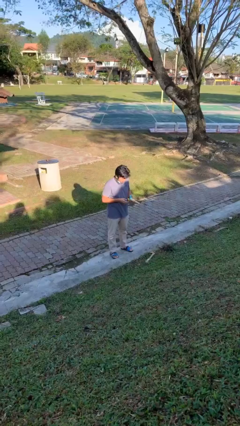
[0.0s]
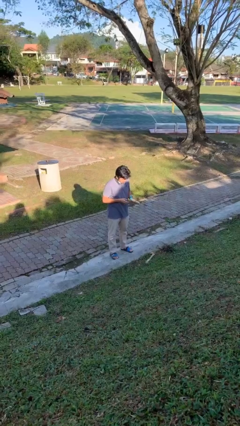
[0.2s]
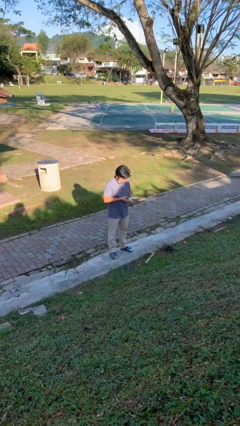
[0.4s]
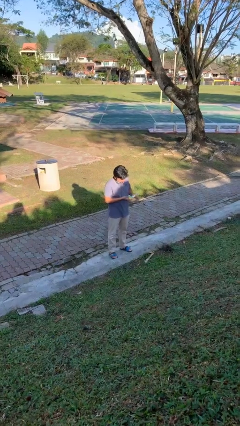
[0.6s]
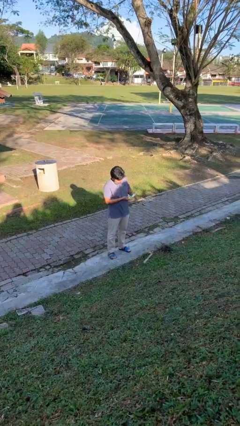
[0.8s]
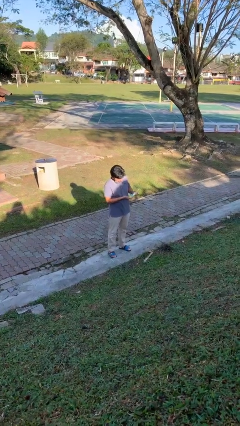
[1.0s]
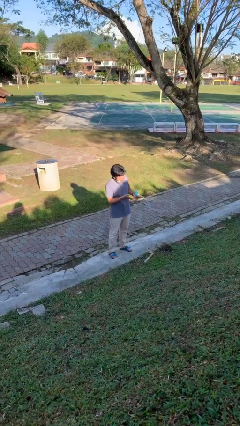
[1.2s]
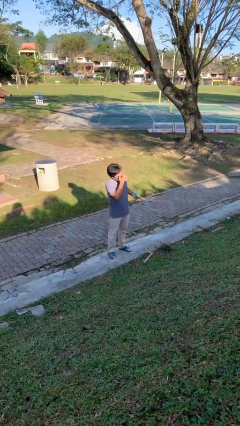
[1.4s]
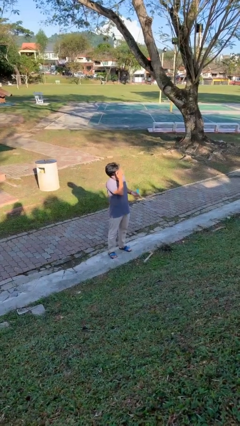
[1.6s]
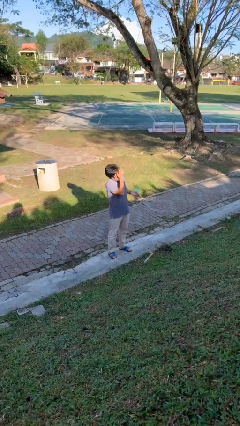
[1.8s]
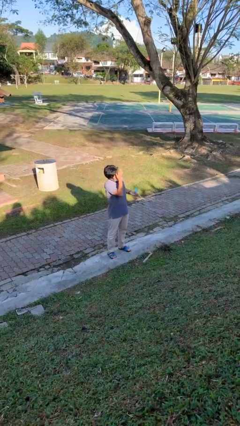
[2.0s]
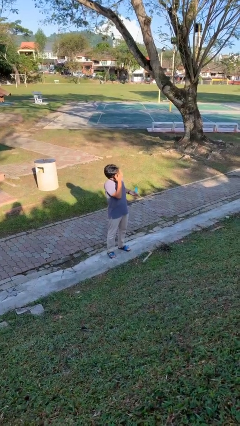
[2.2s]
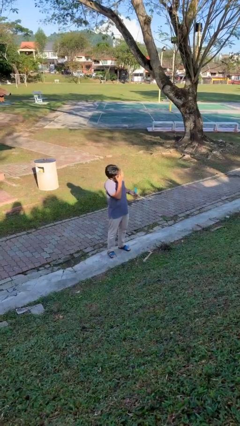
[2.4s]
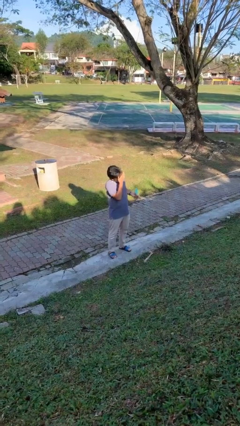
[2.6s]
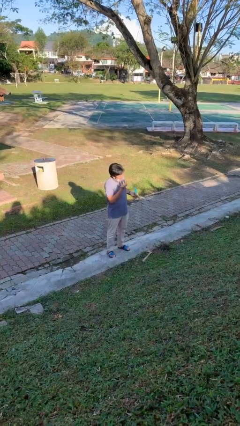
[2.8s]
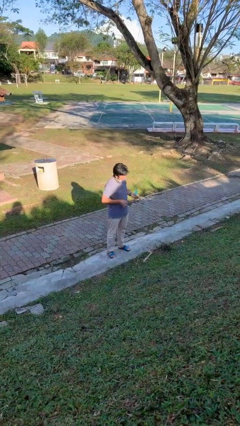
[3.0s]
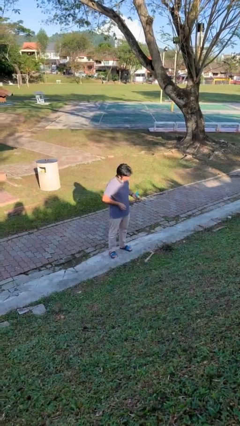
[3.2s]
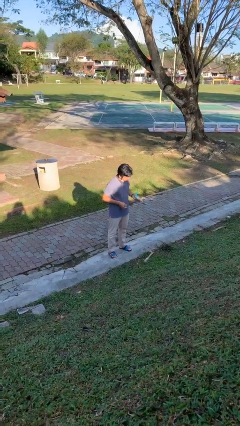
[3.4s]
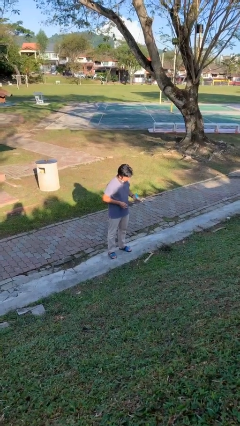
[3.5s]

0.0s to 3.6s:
person applies facial moisturizer

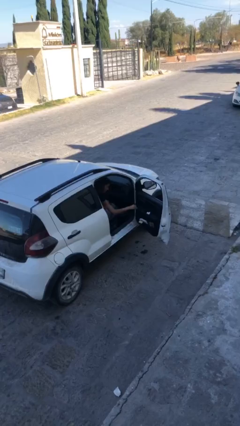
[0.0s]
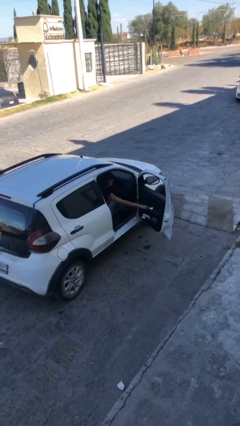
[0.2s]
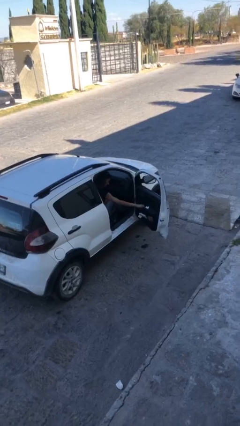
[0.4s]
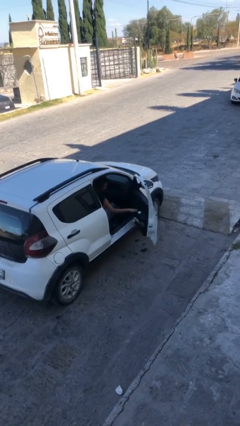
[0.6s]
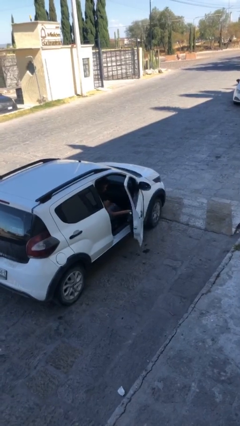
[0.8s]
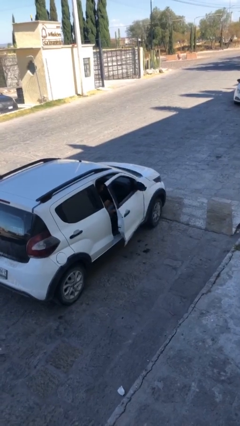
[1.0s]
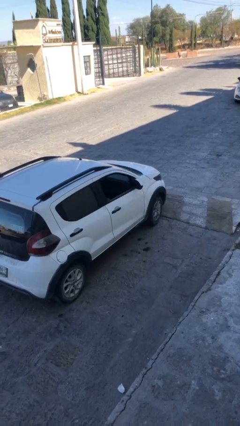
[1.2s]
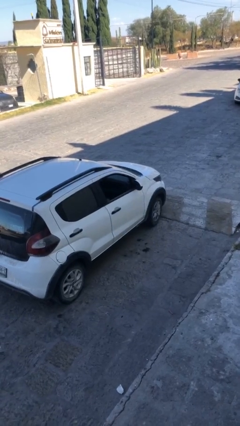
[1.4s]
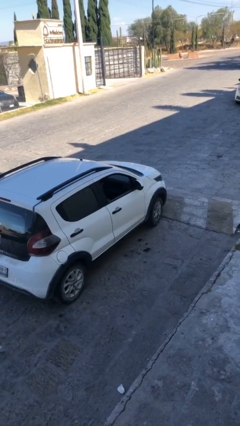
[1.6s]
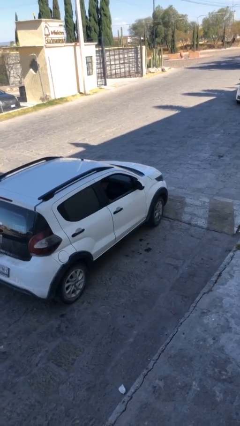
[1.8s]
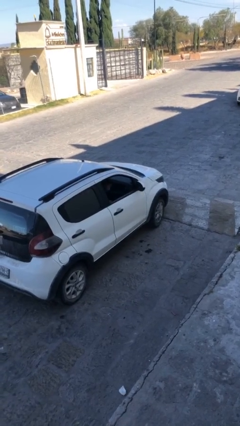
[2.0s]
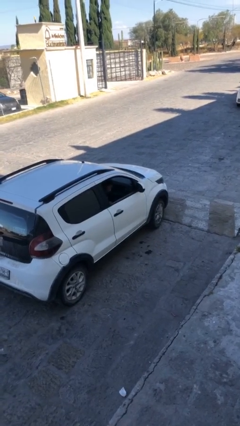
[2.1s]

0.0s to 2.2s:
person closes car door

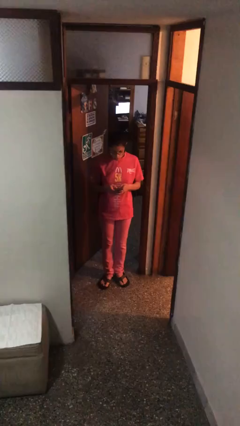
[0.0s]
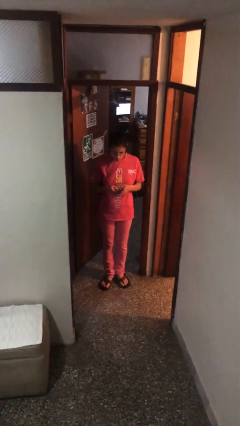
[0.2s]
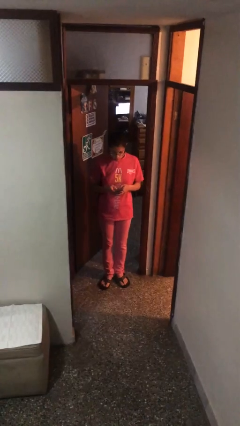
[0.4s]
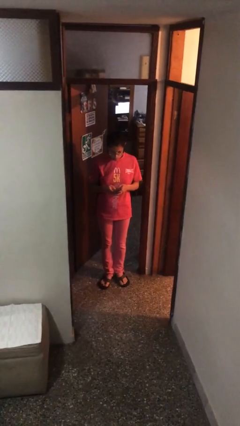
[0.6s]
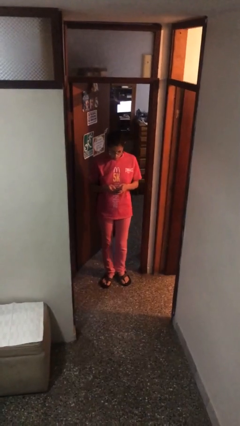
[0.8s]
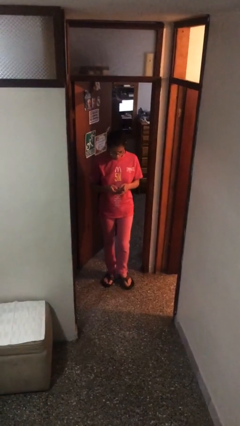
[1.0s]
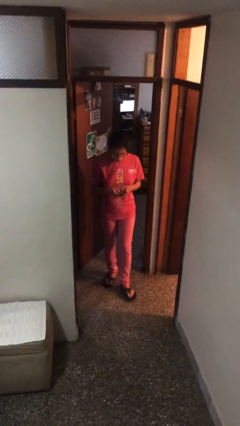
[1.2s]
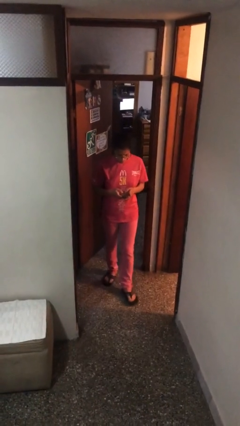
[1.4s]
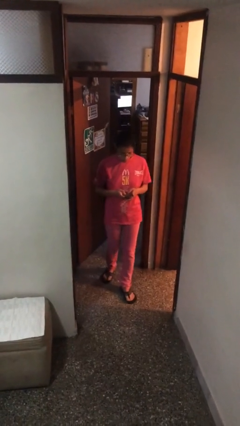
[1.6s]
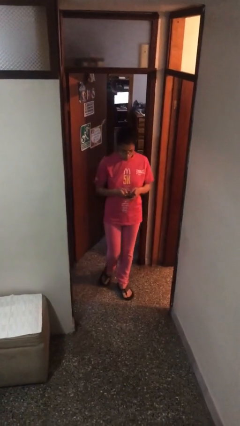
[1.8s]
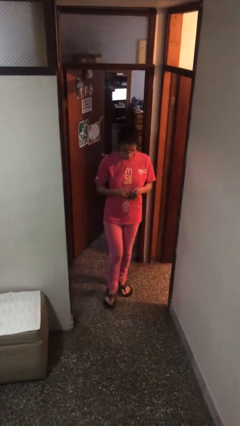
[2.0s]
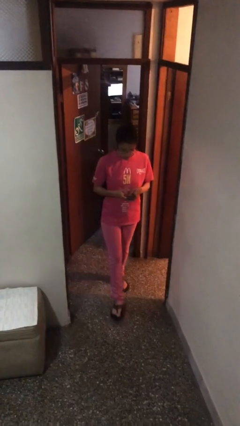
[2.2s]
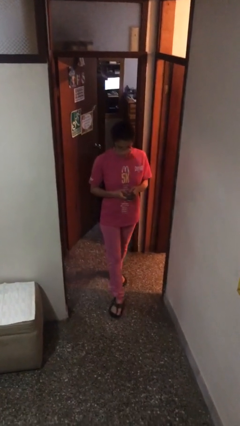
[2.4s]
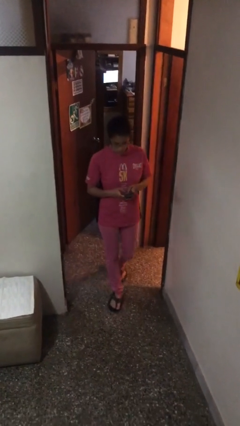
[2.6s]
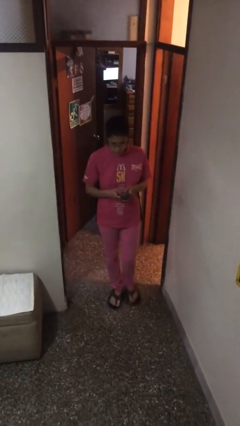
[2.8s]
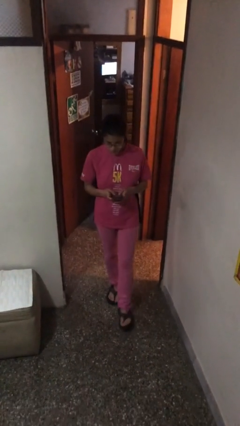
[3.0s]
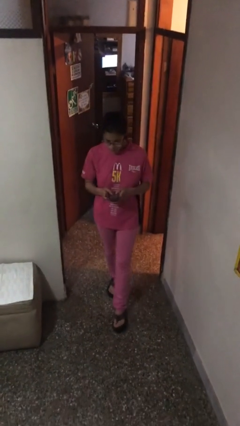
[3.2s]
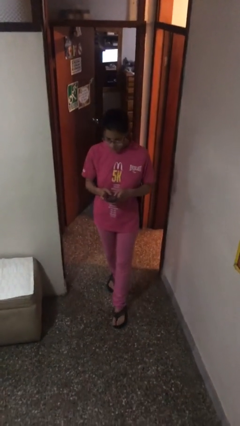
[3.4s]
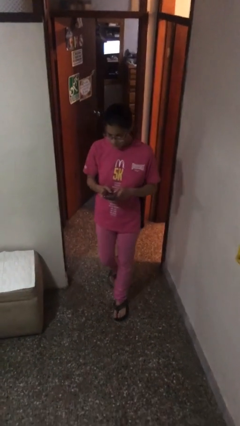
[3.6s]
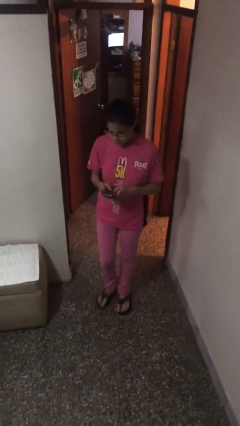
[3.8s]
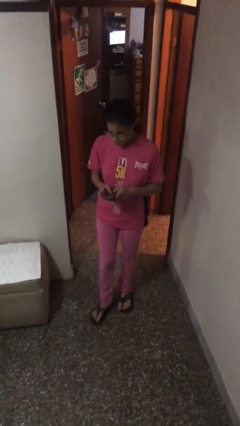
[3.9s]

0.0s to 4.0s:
person texts on phone

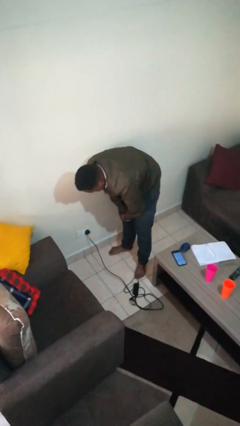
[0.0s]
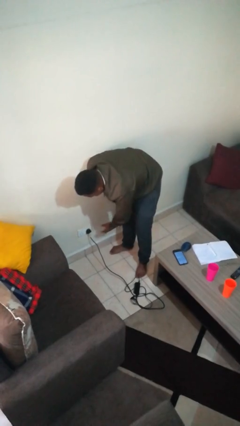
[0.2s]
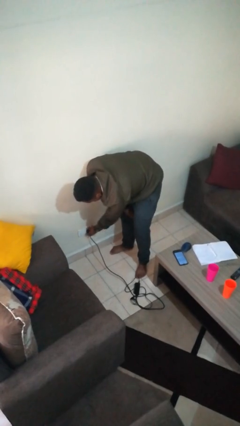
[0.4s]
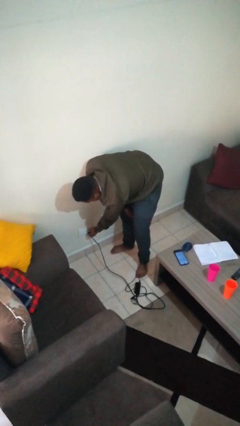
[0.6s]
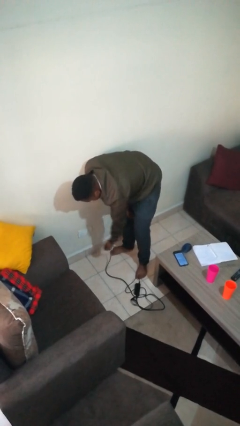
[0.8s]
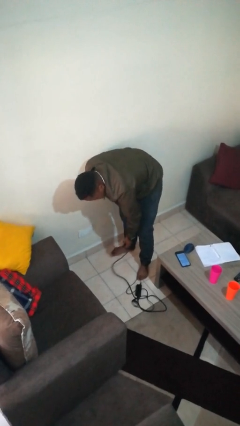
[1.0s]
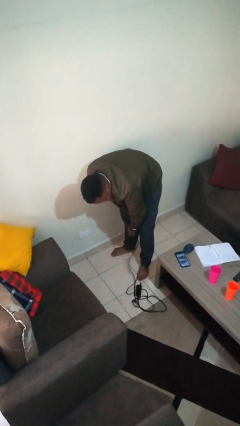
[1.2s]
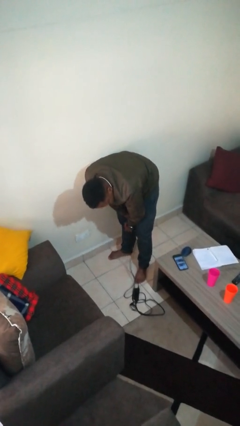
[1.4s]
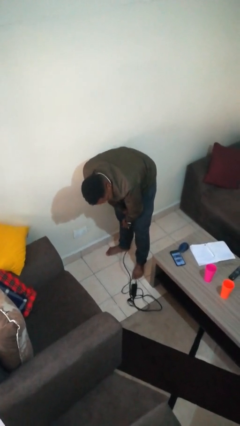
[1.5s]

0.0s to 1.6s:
person unplugs from electrical socket

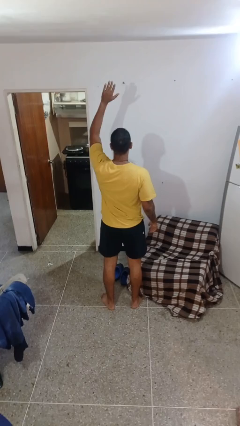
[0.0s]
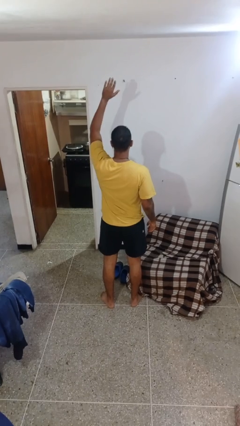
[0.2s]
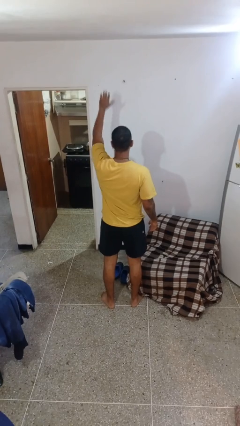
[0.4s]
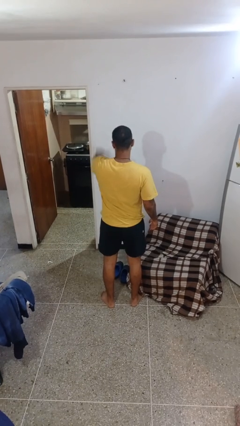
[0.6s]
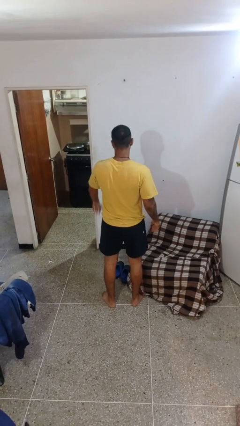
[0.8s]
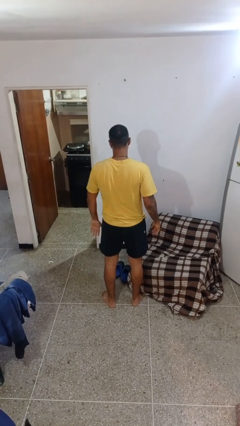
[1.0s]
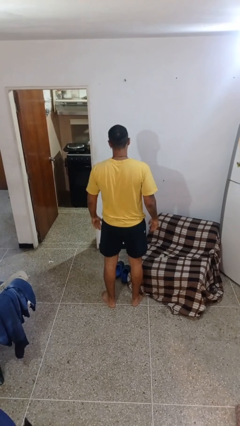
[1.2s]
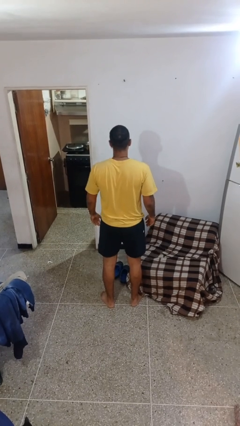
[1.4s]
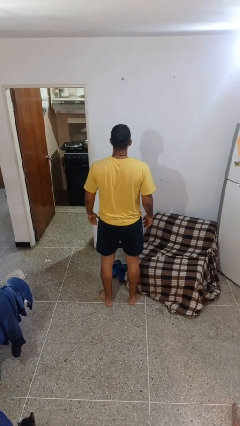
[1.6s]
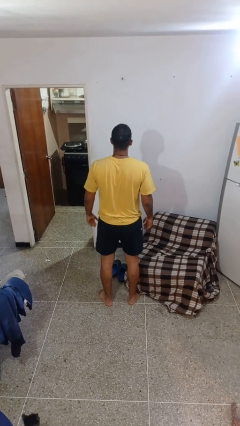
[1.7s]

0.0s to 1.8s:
person gestures swipe down

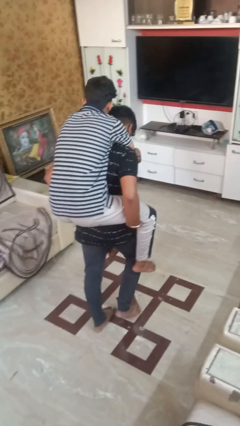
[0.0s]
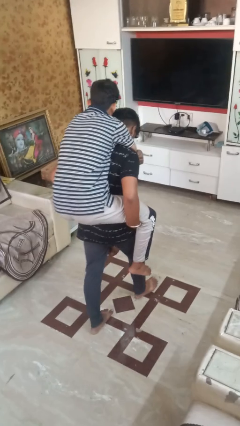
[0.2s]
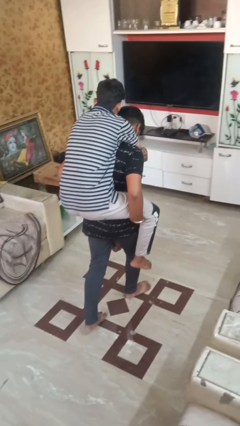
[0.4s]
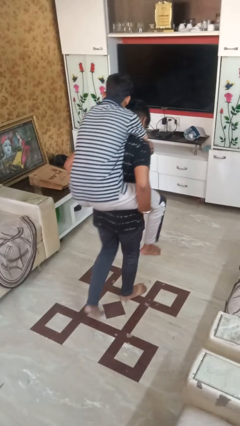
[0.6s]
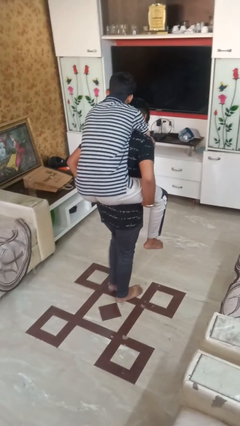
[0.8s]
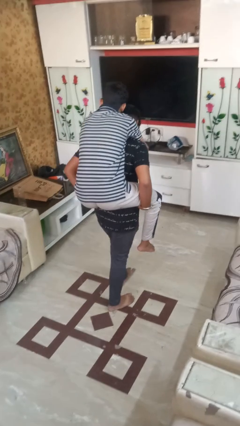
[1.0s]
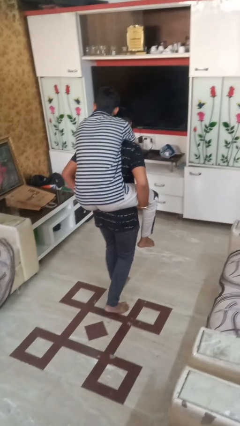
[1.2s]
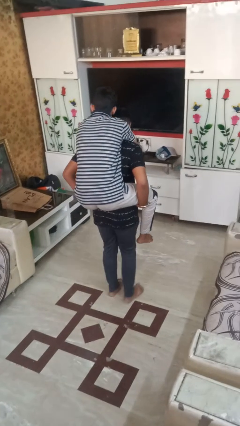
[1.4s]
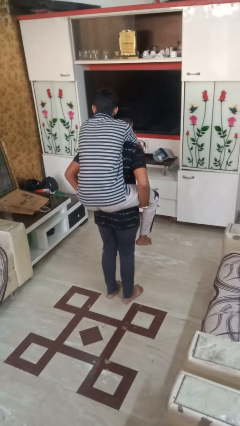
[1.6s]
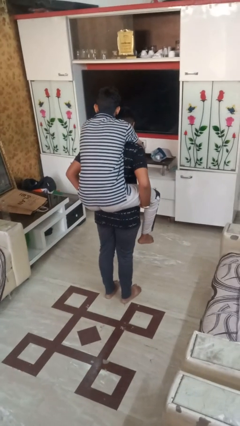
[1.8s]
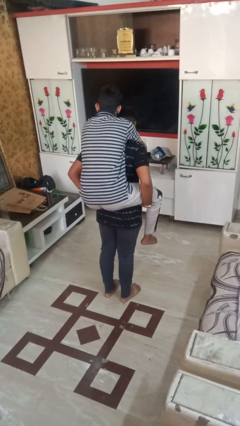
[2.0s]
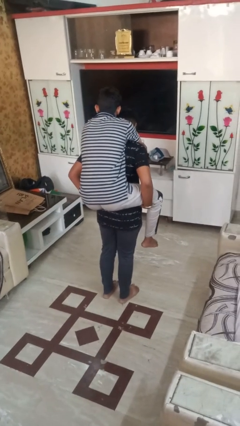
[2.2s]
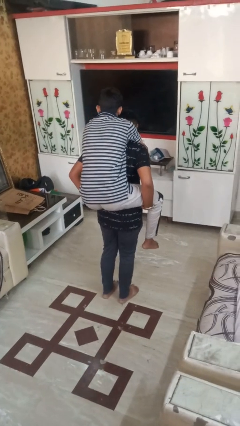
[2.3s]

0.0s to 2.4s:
person carries person on back

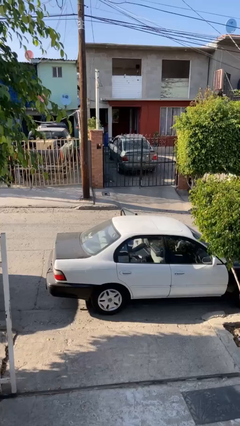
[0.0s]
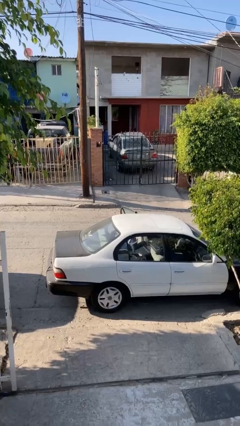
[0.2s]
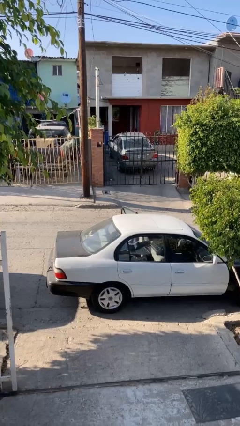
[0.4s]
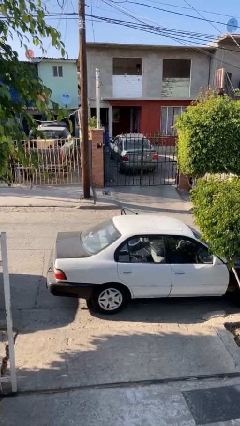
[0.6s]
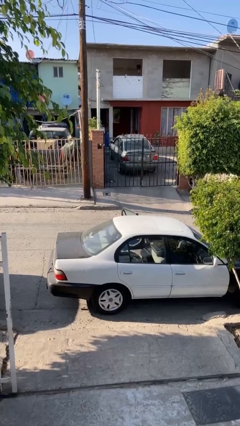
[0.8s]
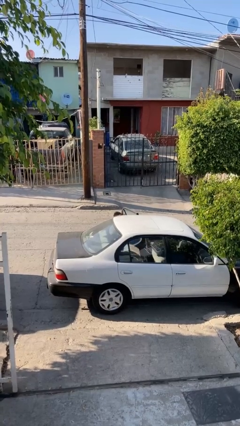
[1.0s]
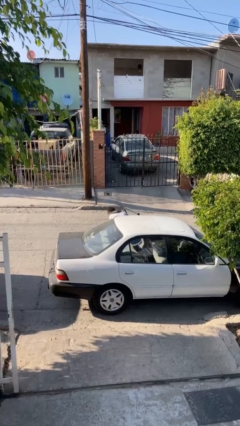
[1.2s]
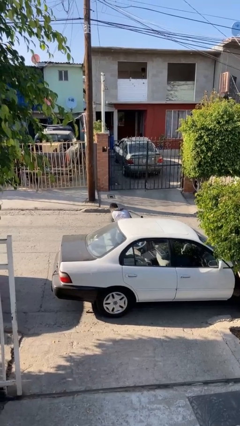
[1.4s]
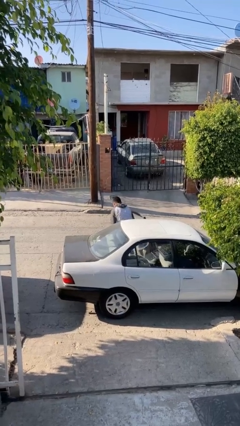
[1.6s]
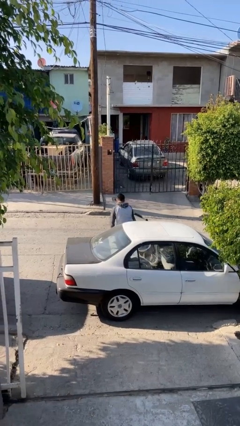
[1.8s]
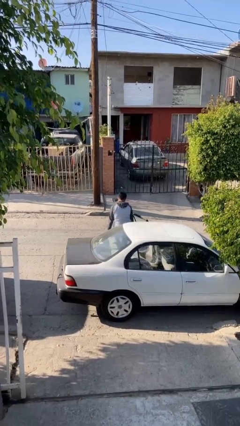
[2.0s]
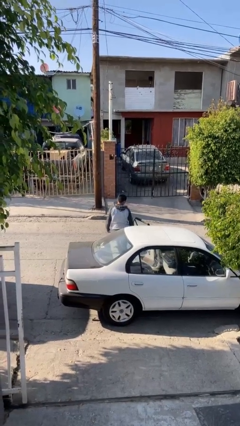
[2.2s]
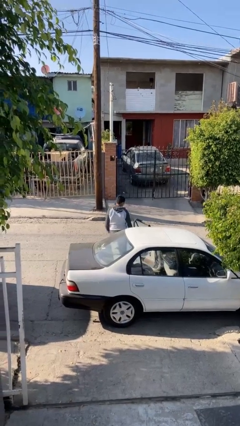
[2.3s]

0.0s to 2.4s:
person exits car
